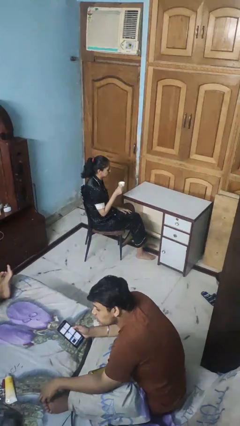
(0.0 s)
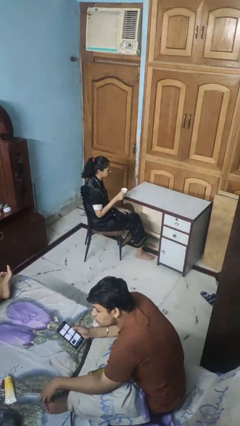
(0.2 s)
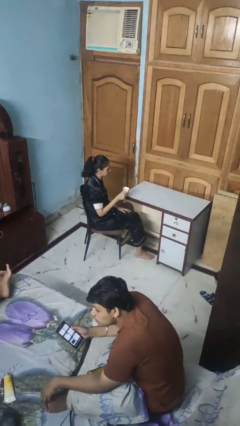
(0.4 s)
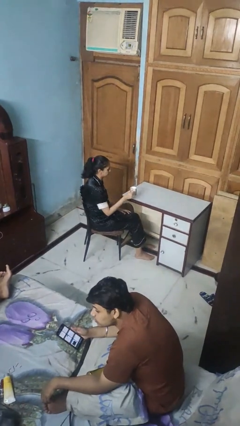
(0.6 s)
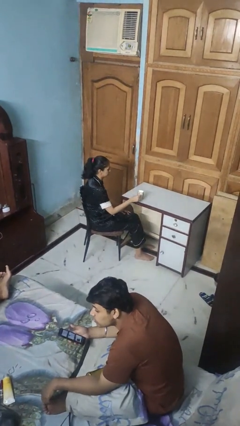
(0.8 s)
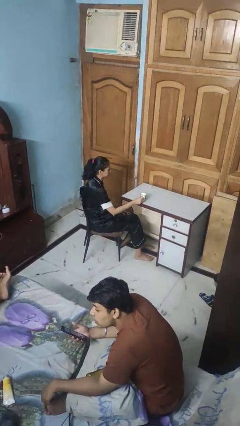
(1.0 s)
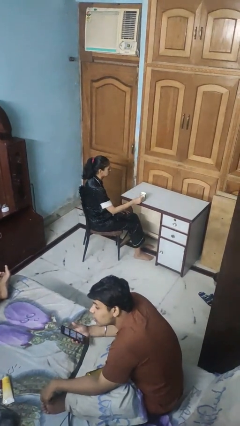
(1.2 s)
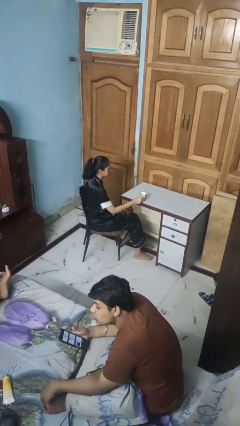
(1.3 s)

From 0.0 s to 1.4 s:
person puts down object on table

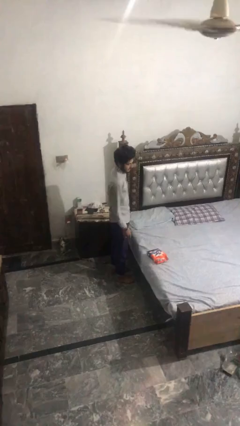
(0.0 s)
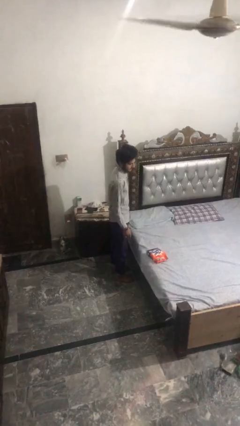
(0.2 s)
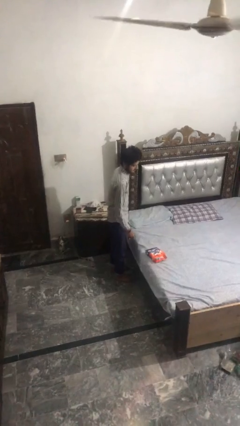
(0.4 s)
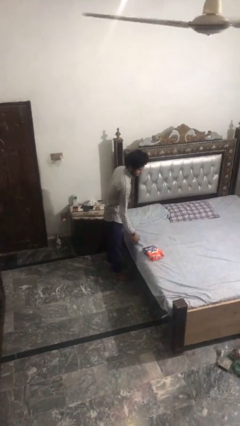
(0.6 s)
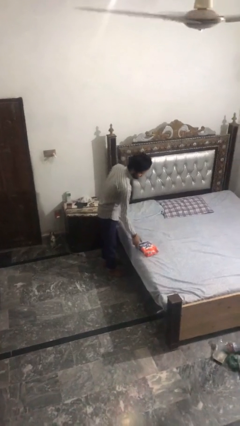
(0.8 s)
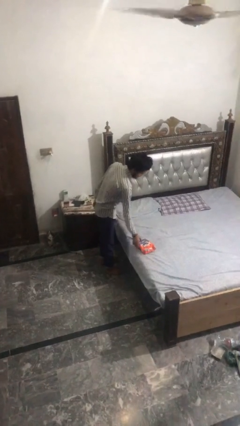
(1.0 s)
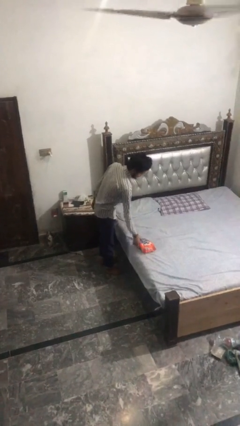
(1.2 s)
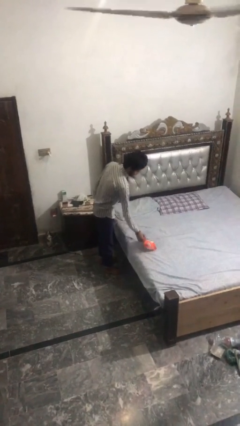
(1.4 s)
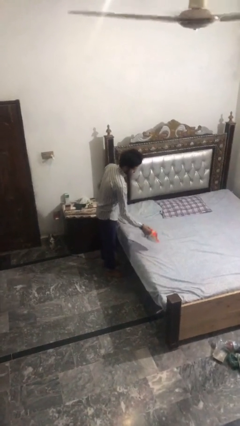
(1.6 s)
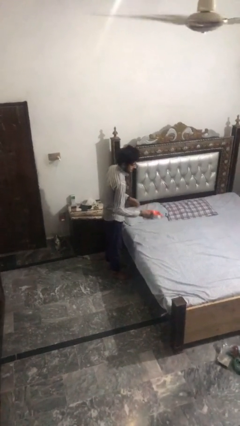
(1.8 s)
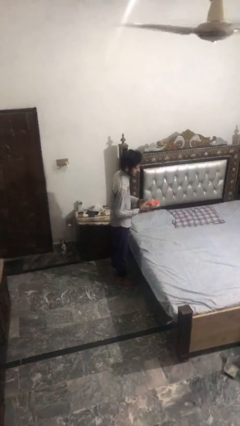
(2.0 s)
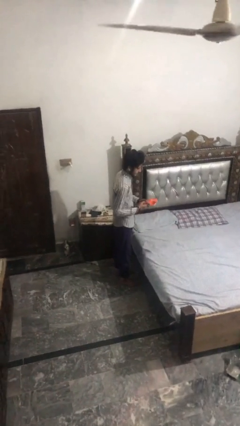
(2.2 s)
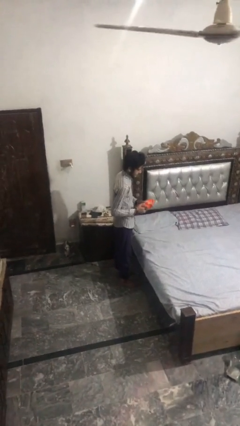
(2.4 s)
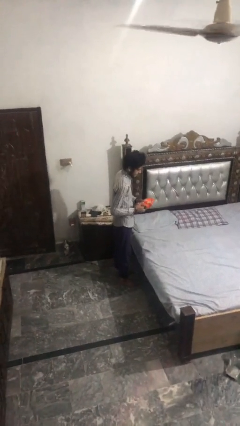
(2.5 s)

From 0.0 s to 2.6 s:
person picks up object from bed

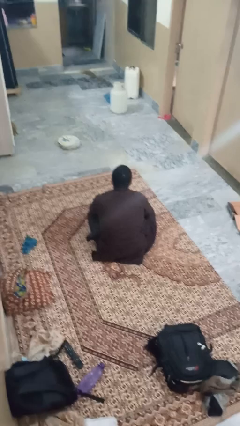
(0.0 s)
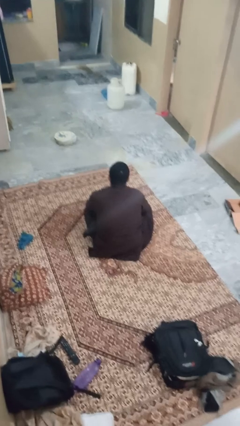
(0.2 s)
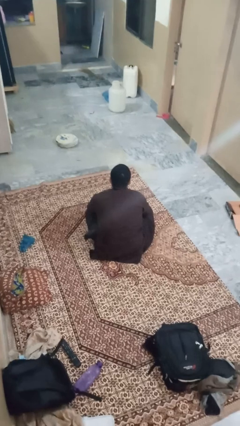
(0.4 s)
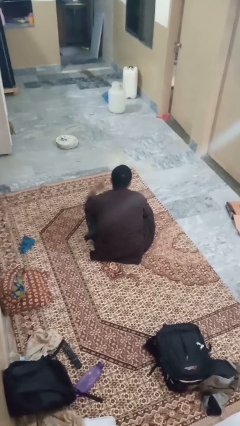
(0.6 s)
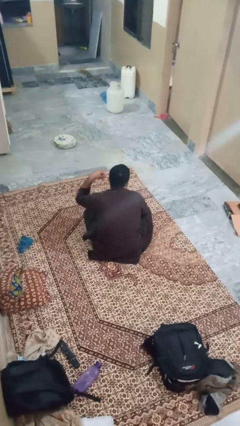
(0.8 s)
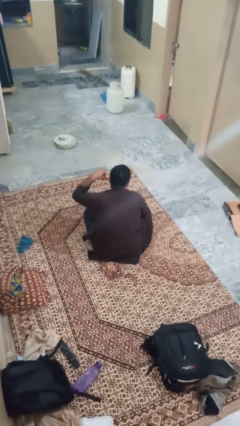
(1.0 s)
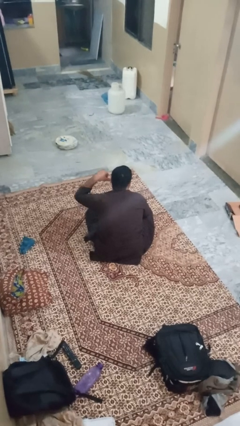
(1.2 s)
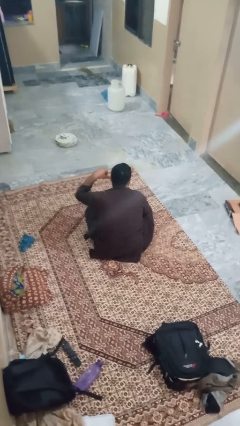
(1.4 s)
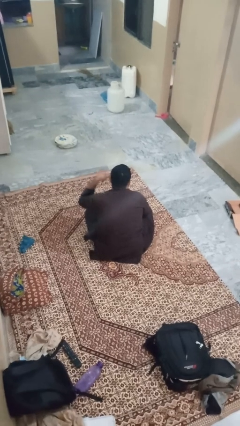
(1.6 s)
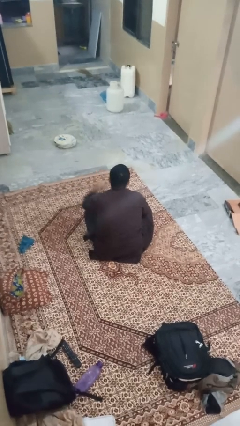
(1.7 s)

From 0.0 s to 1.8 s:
person gestures call me

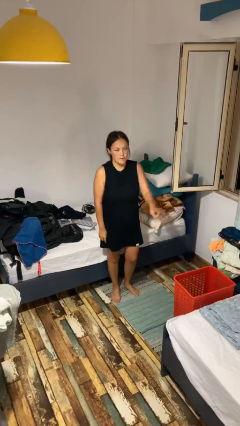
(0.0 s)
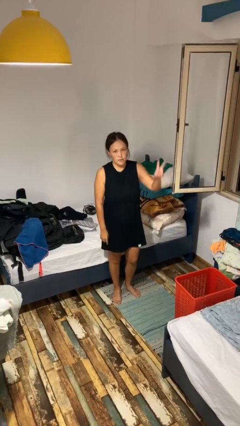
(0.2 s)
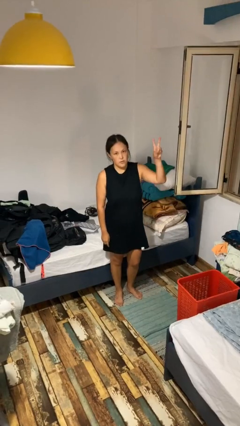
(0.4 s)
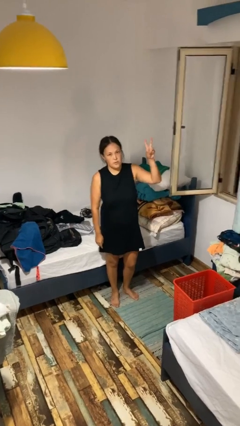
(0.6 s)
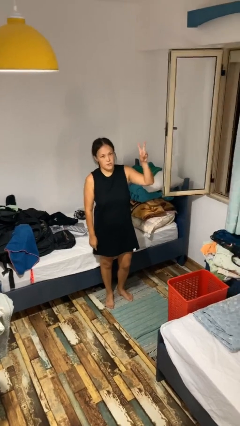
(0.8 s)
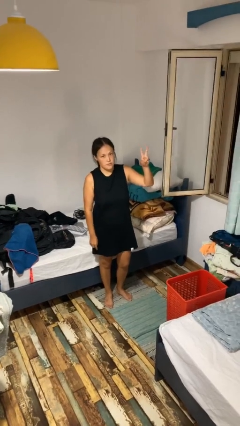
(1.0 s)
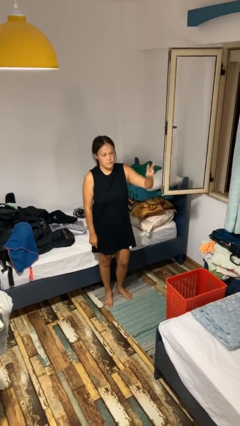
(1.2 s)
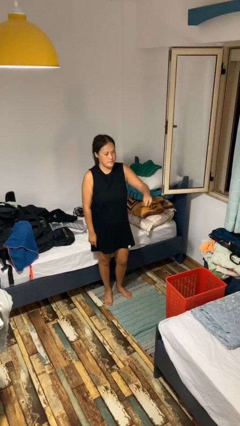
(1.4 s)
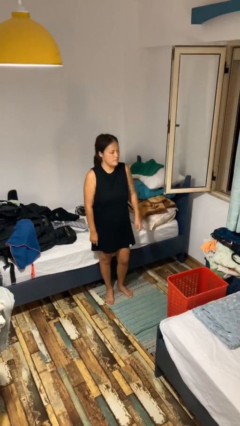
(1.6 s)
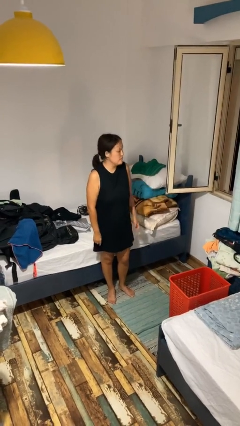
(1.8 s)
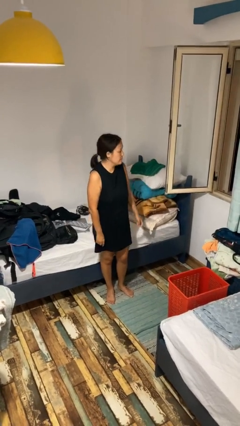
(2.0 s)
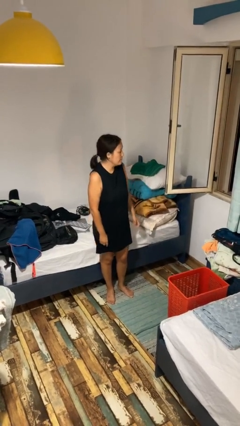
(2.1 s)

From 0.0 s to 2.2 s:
person gestures peace

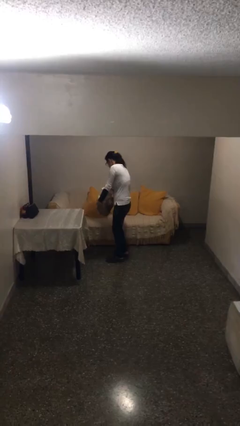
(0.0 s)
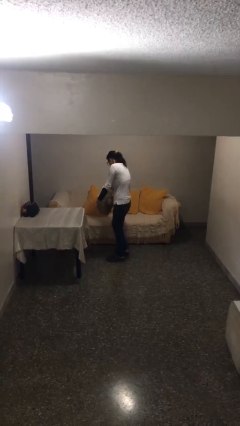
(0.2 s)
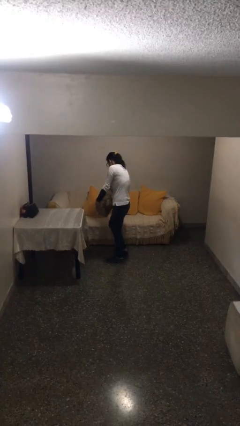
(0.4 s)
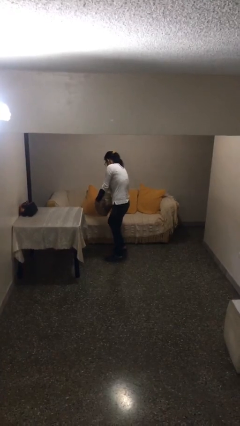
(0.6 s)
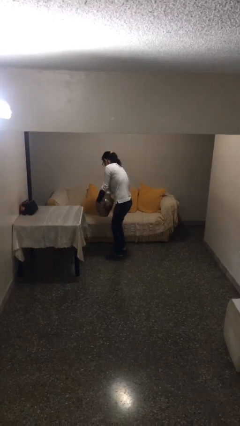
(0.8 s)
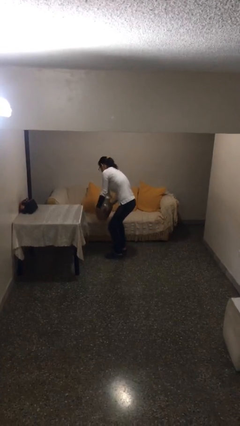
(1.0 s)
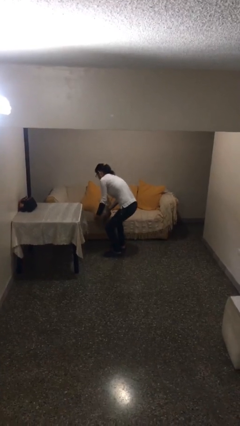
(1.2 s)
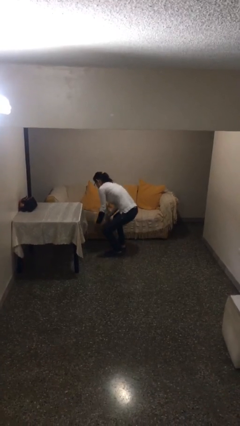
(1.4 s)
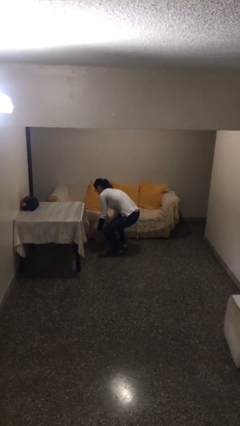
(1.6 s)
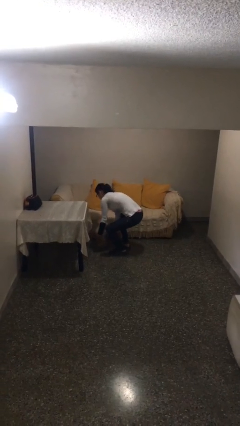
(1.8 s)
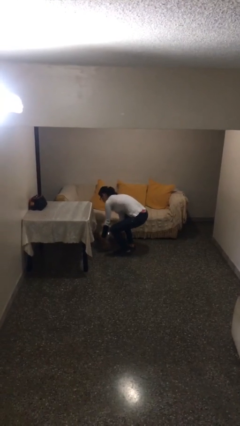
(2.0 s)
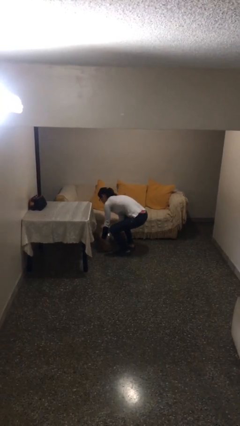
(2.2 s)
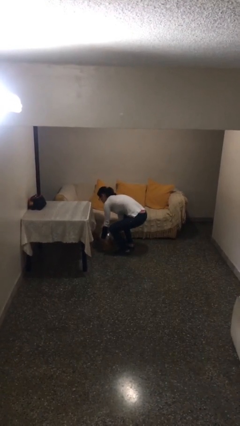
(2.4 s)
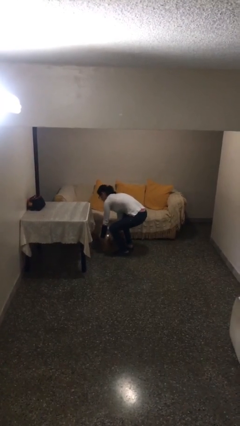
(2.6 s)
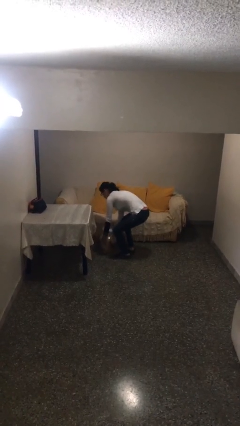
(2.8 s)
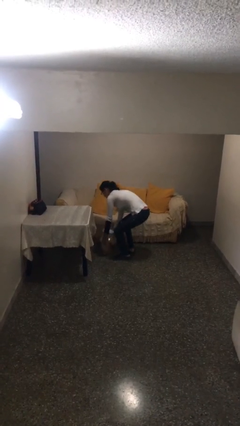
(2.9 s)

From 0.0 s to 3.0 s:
person puts down object on floor

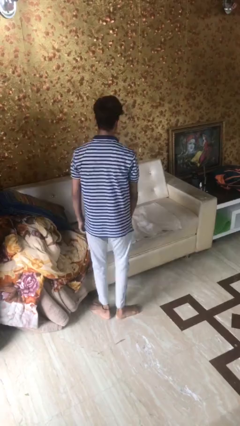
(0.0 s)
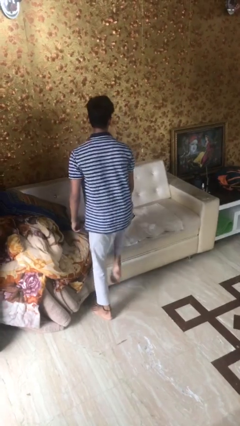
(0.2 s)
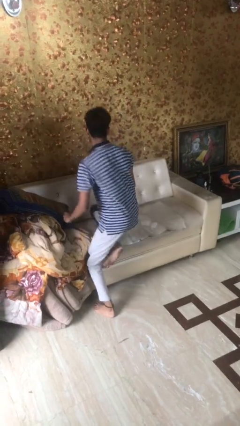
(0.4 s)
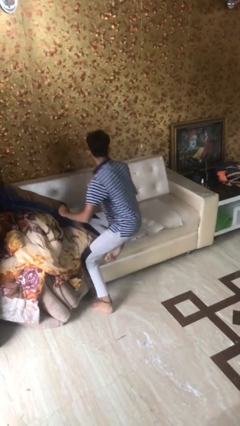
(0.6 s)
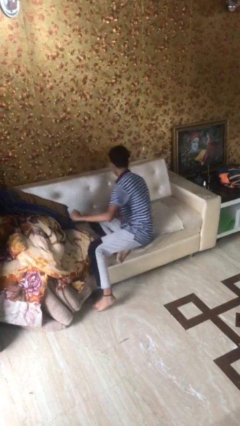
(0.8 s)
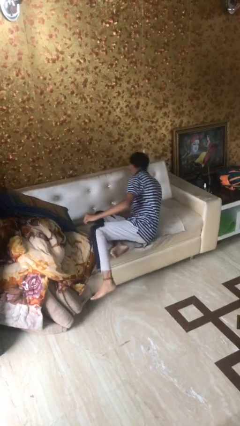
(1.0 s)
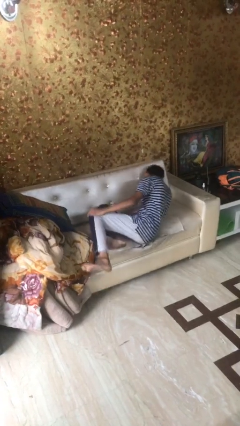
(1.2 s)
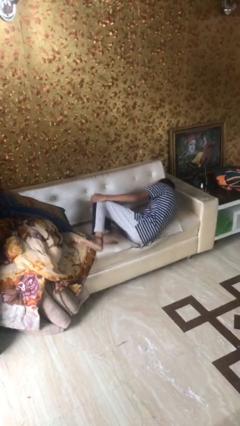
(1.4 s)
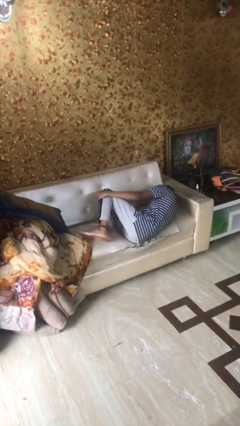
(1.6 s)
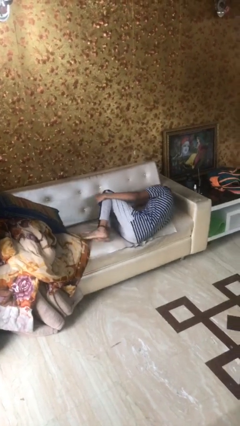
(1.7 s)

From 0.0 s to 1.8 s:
person lies down on couch

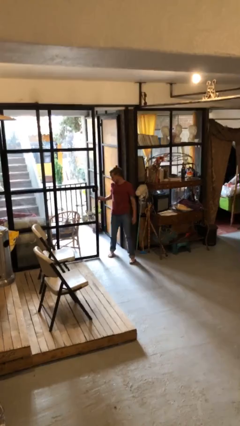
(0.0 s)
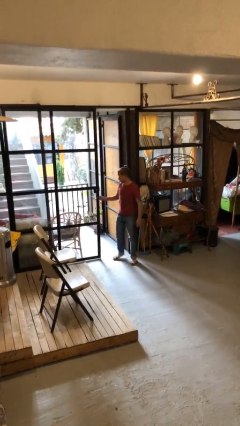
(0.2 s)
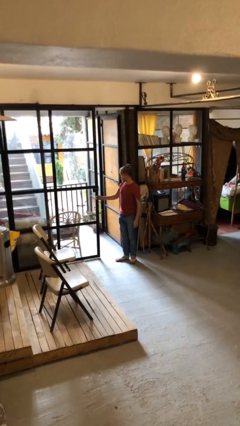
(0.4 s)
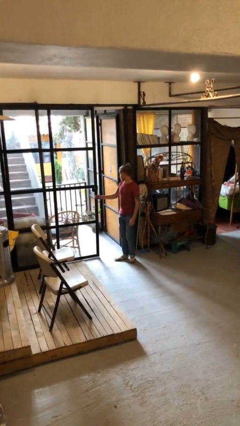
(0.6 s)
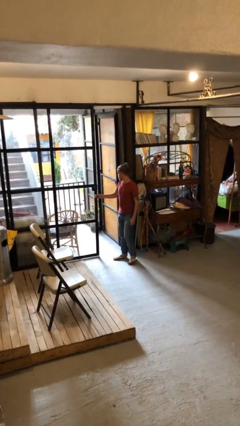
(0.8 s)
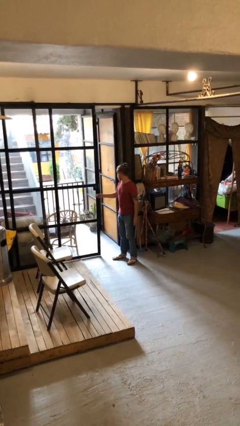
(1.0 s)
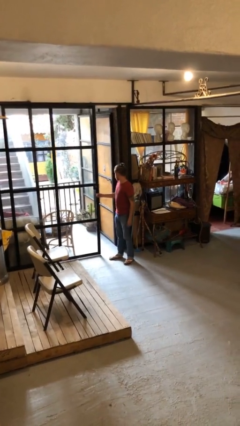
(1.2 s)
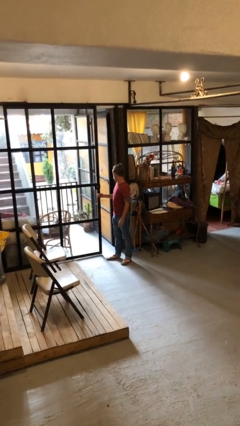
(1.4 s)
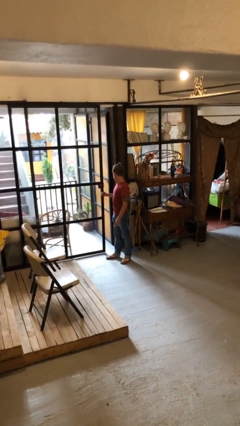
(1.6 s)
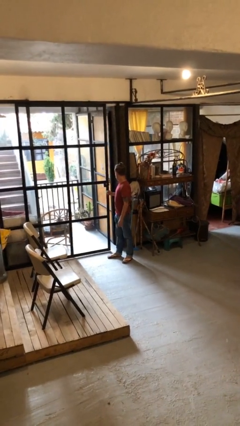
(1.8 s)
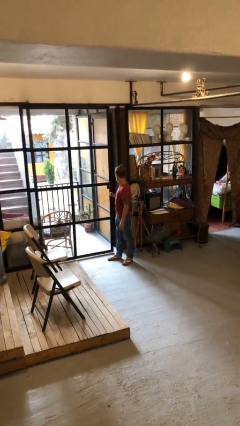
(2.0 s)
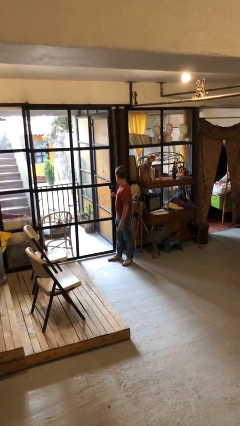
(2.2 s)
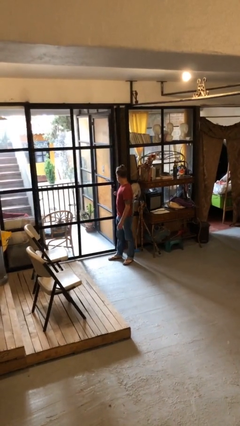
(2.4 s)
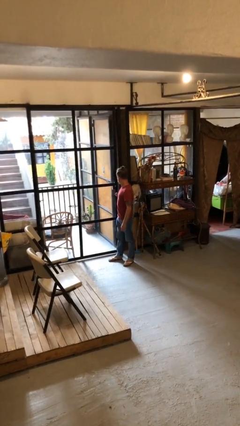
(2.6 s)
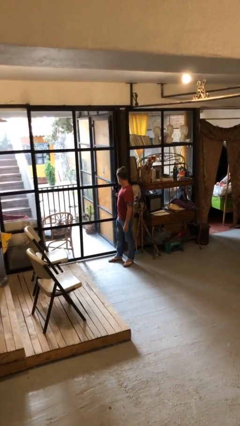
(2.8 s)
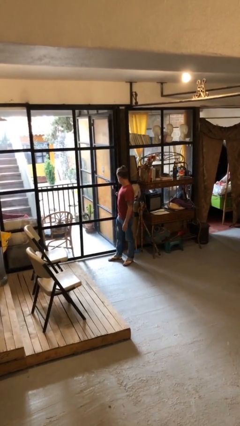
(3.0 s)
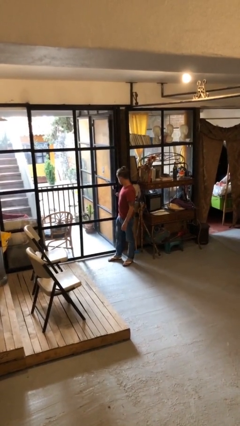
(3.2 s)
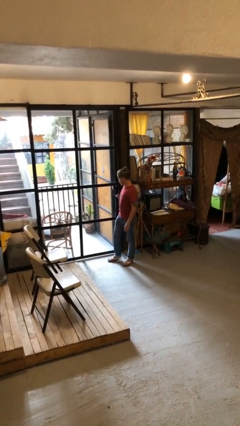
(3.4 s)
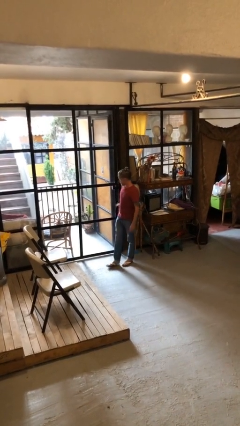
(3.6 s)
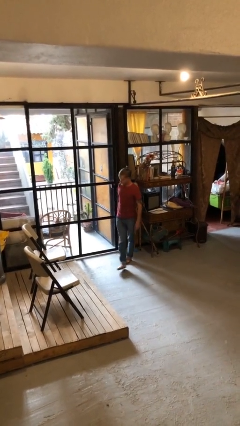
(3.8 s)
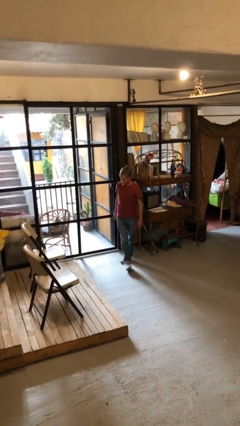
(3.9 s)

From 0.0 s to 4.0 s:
person closes facility door

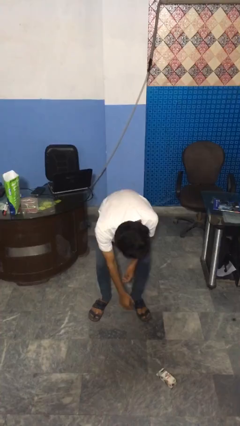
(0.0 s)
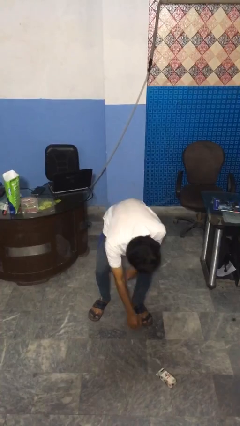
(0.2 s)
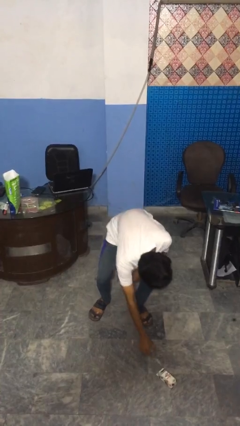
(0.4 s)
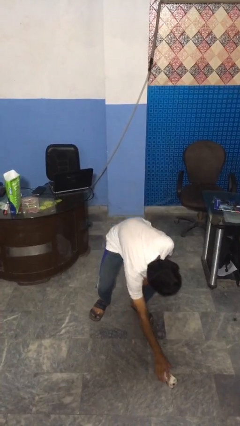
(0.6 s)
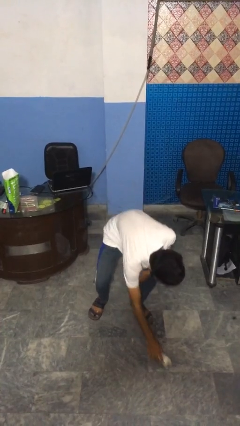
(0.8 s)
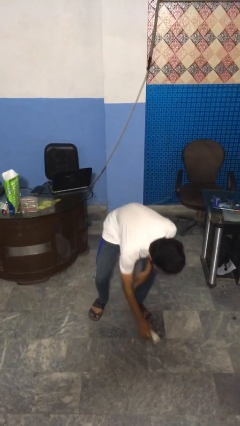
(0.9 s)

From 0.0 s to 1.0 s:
person picks up object from floor
